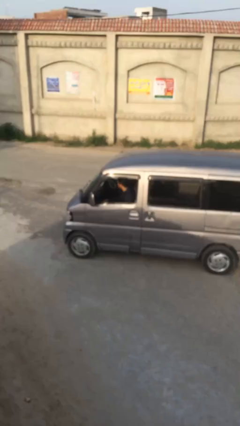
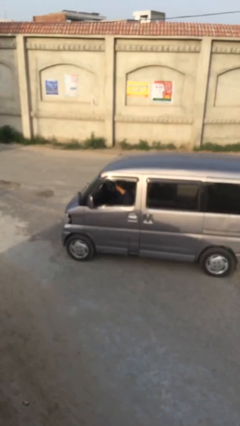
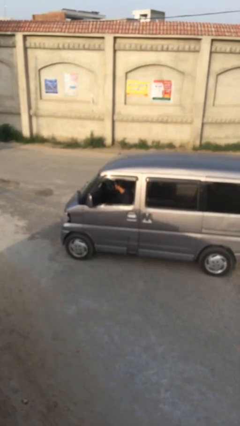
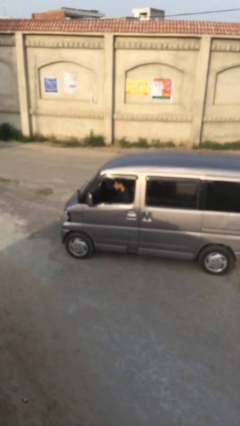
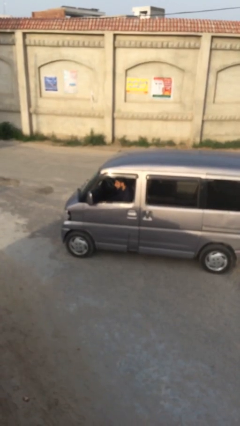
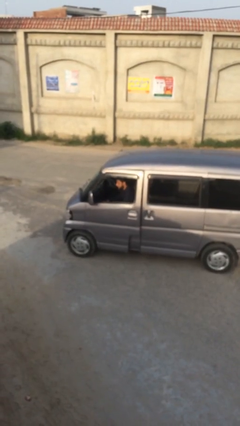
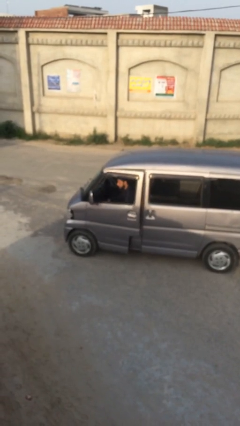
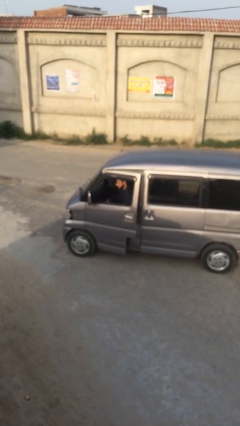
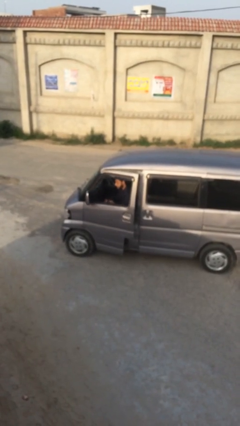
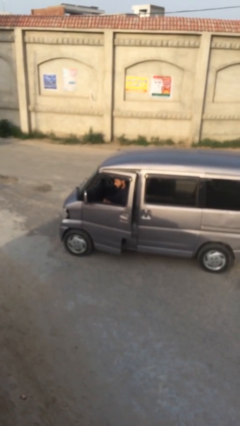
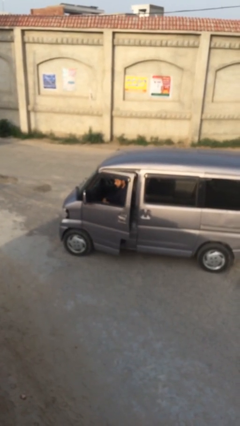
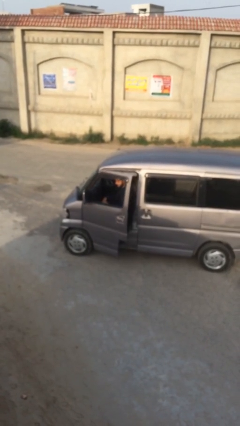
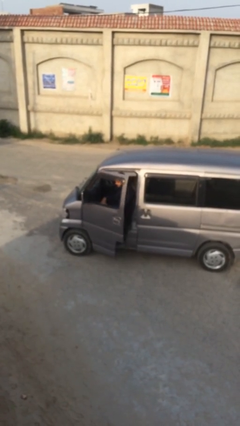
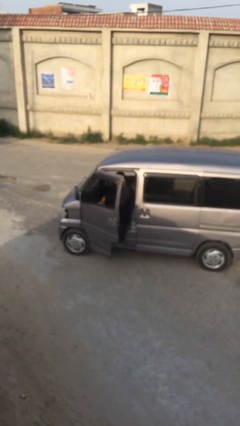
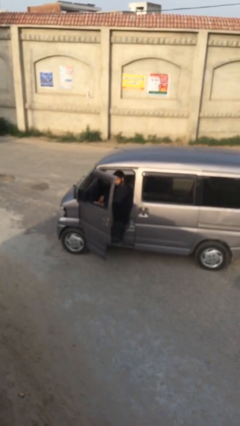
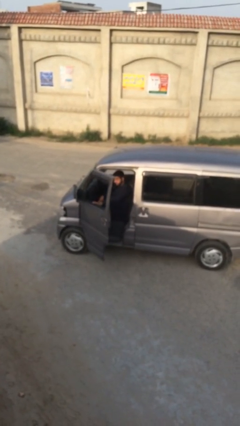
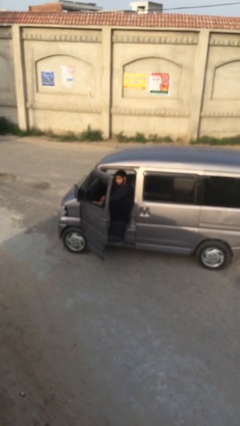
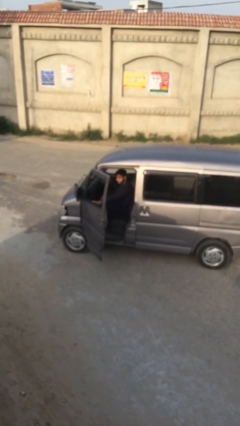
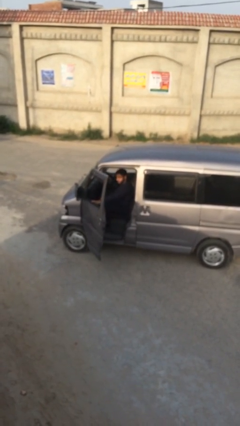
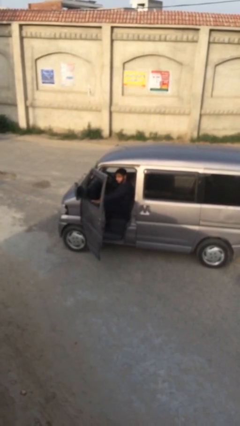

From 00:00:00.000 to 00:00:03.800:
person opens car door

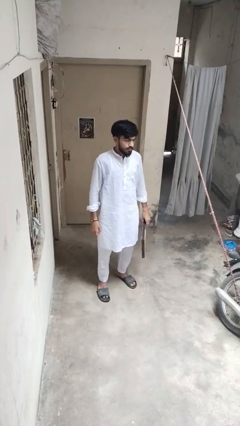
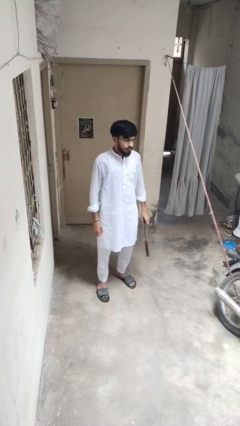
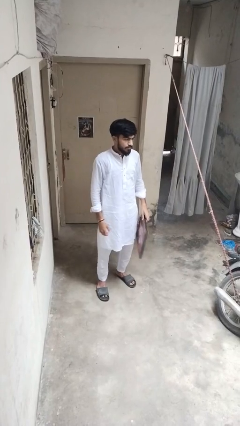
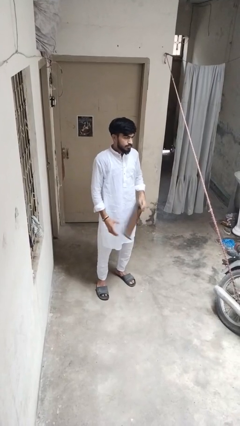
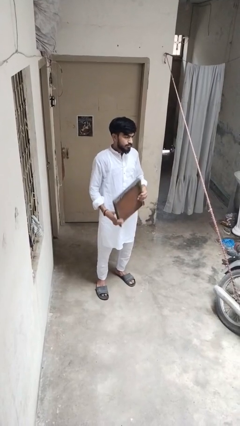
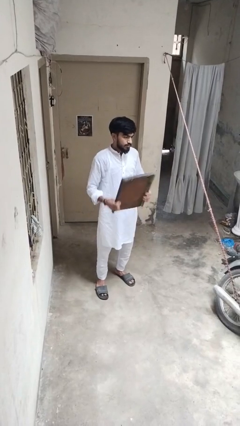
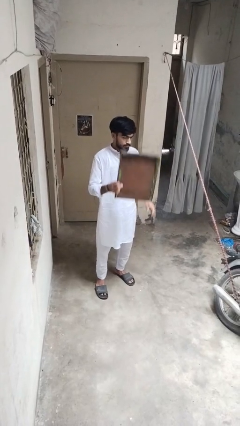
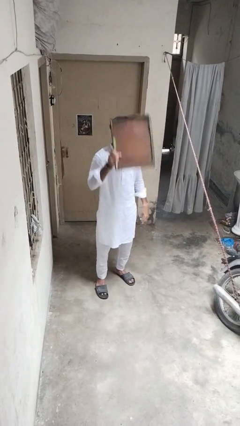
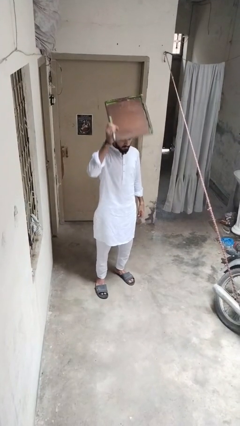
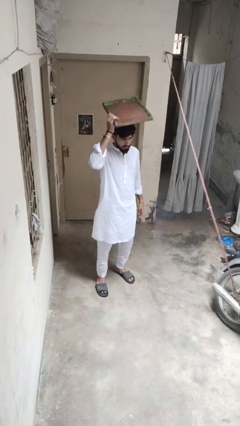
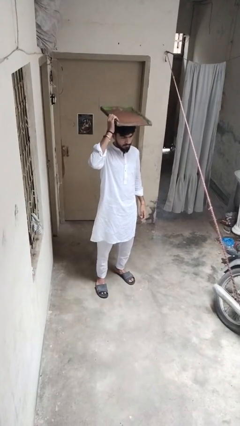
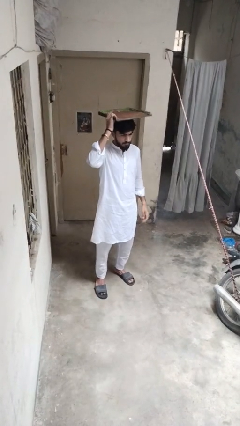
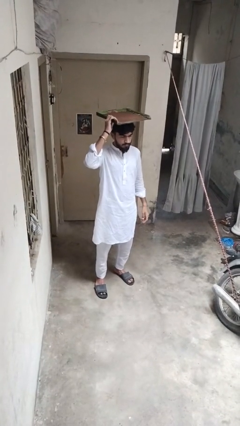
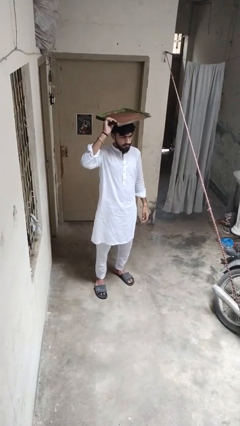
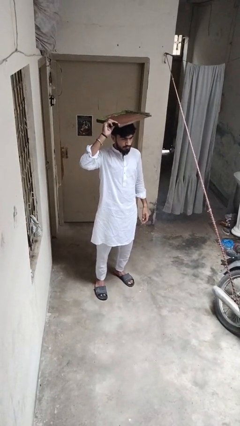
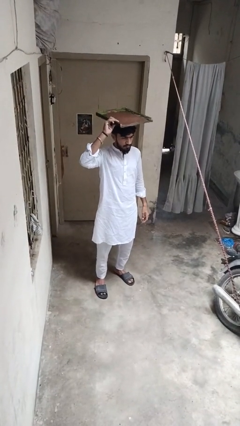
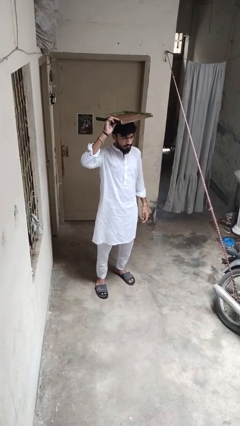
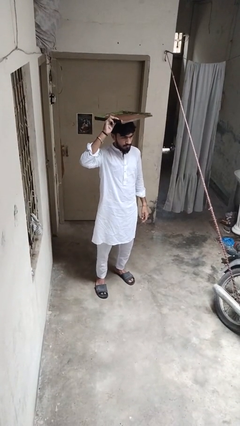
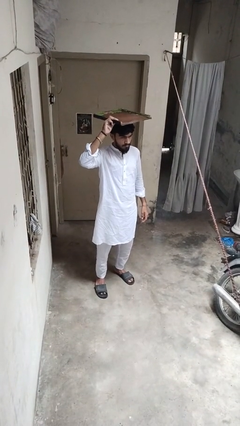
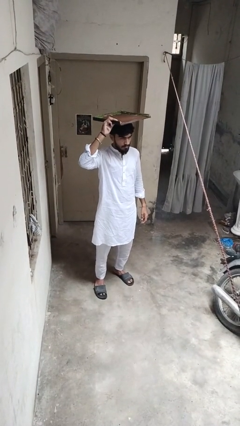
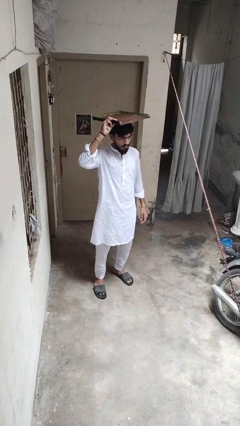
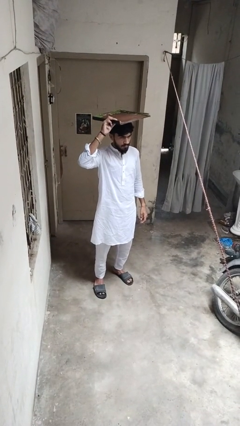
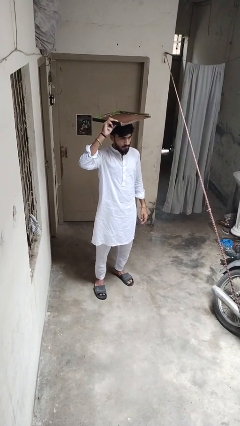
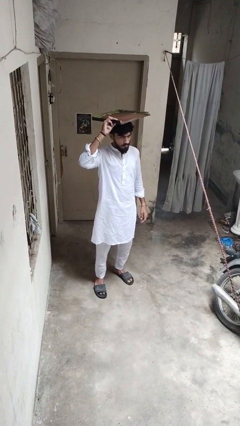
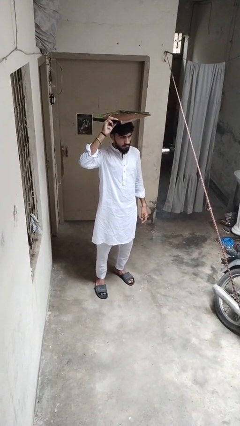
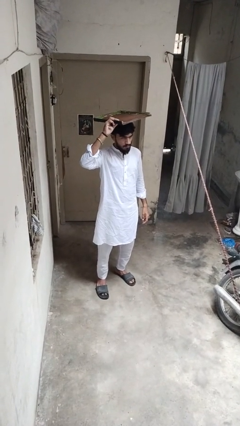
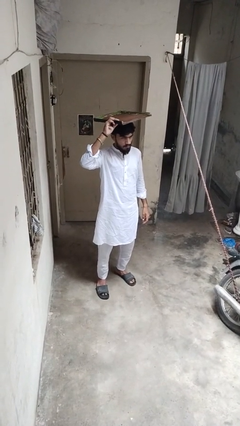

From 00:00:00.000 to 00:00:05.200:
person holds object above head

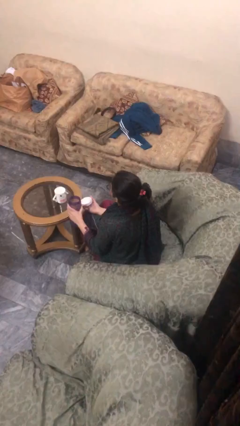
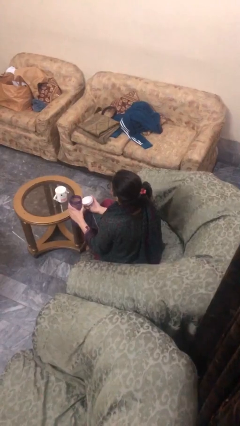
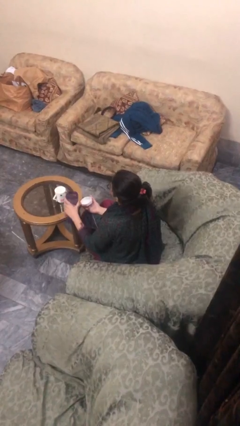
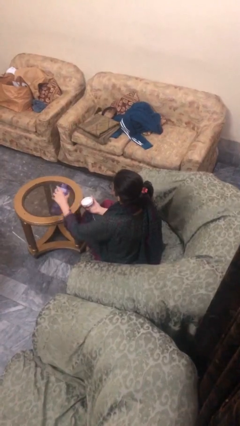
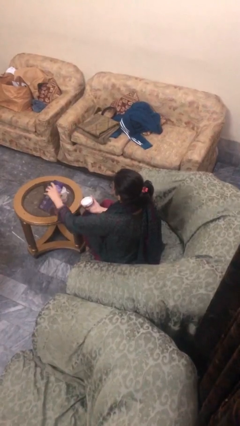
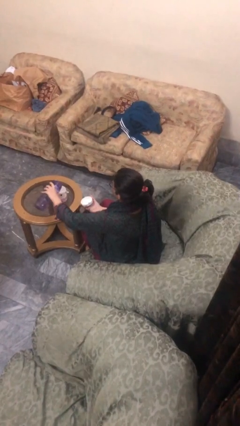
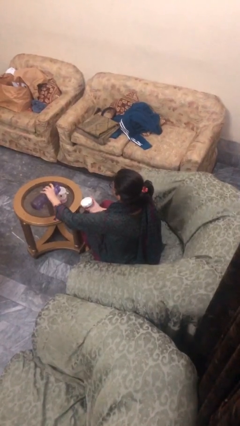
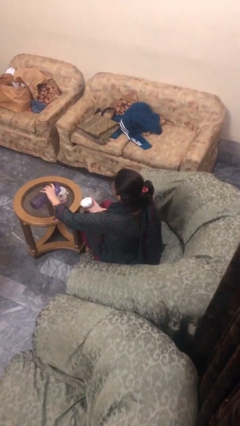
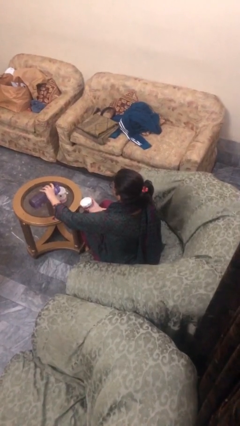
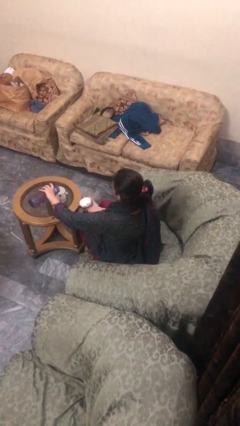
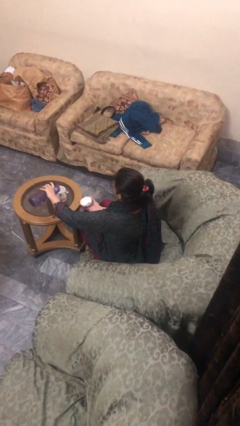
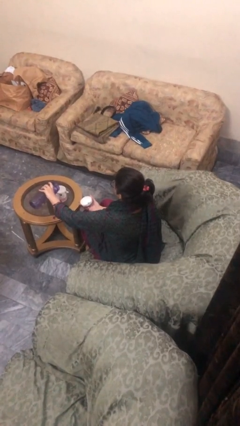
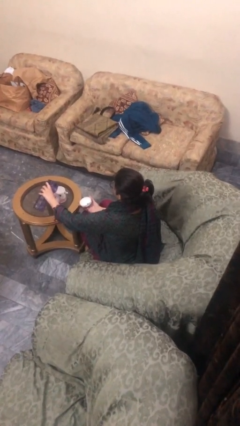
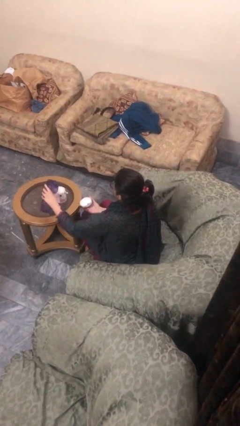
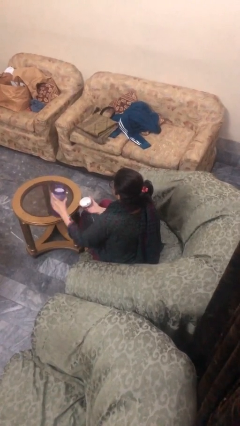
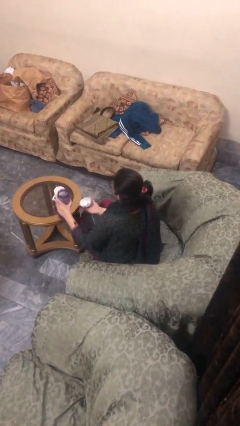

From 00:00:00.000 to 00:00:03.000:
person pours liquid into cup

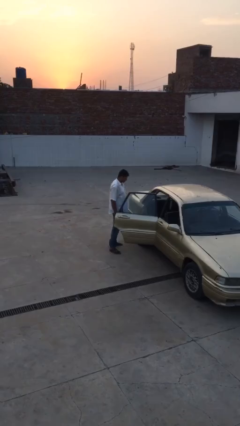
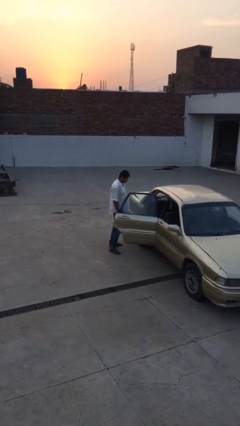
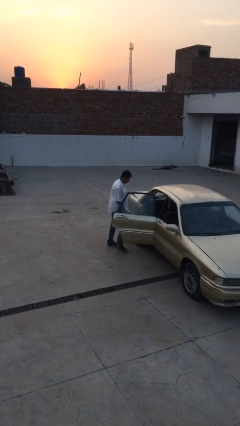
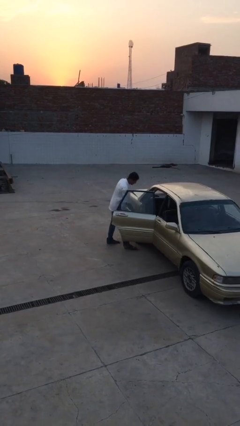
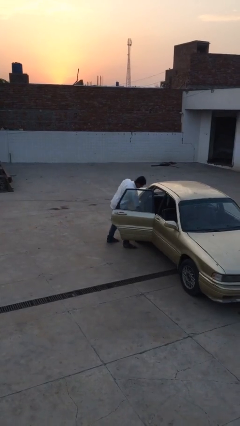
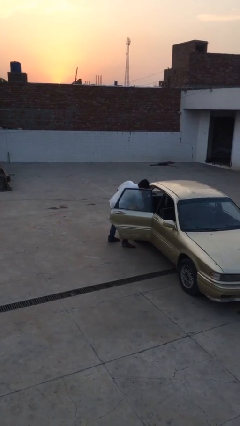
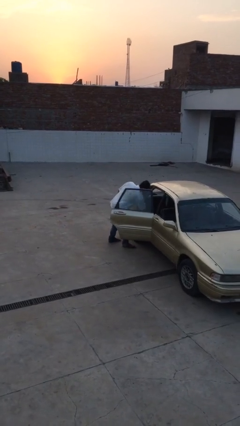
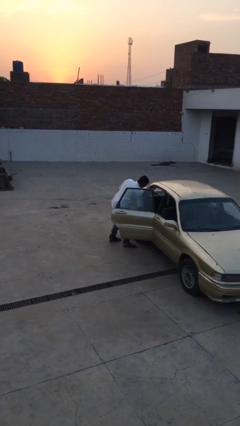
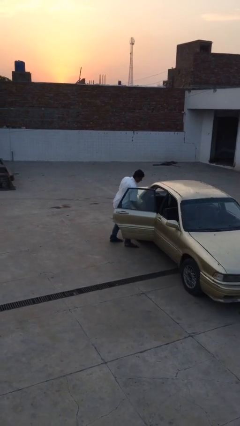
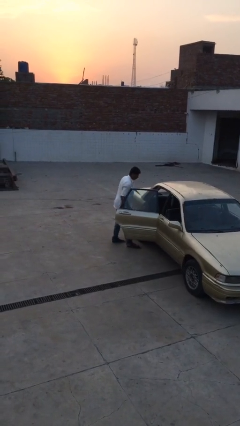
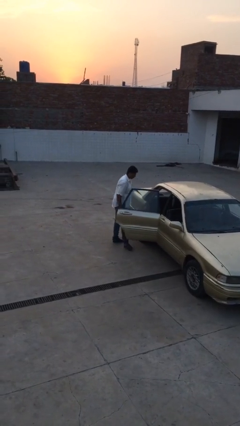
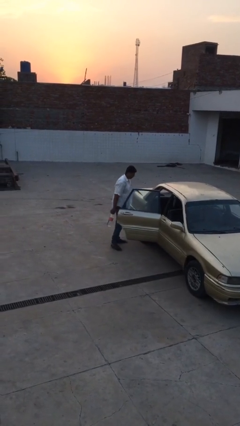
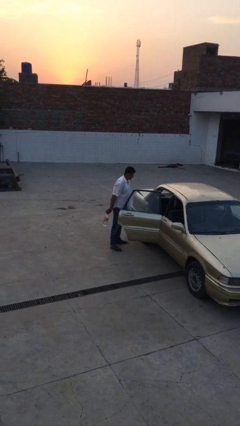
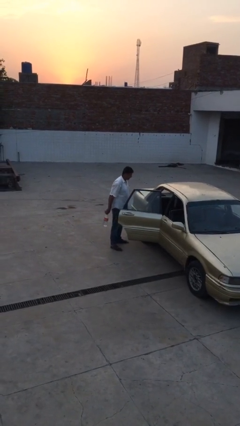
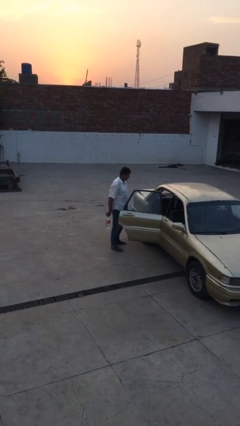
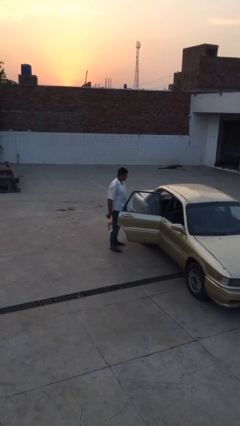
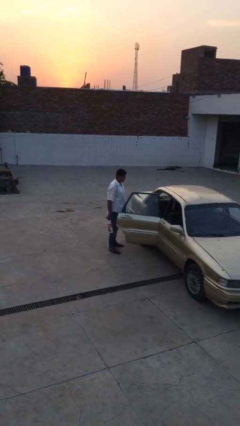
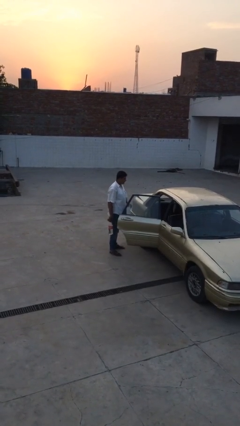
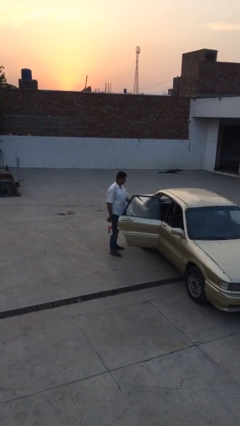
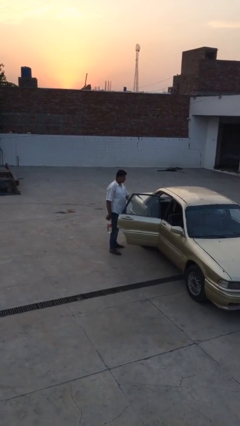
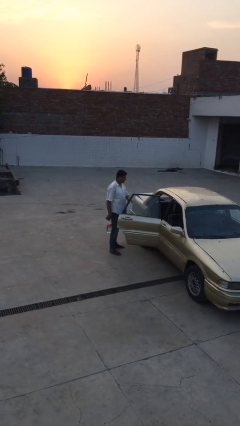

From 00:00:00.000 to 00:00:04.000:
person unloads car

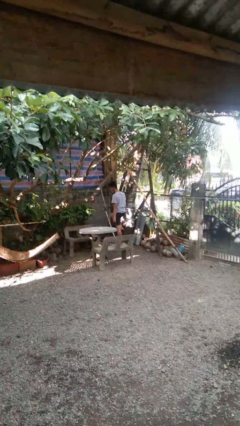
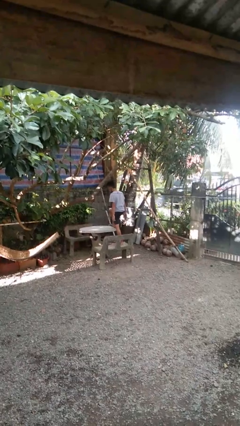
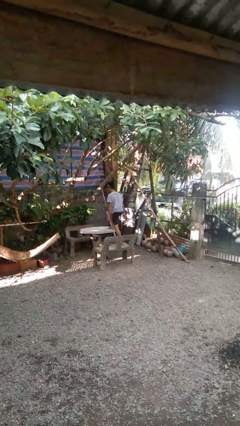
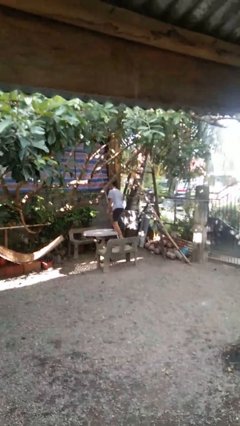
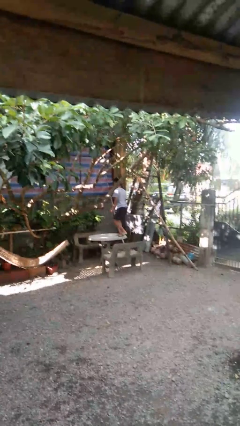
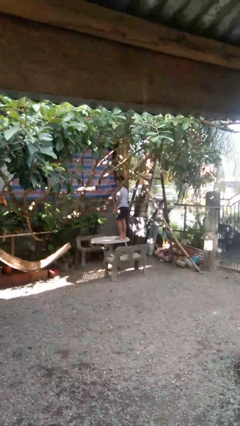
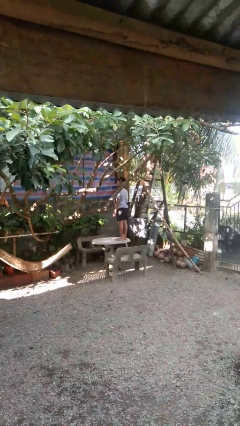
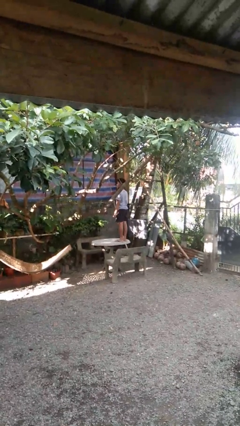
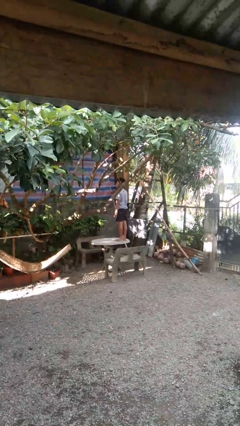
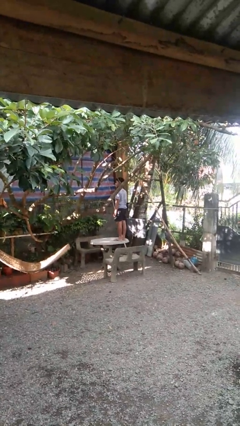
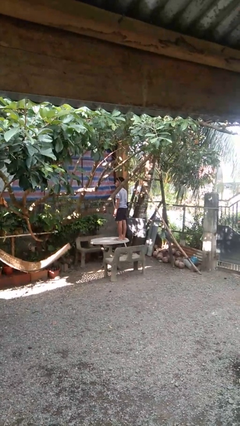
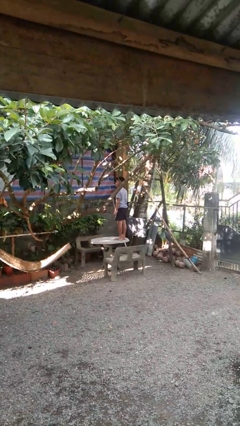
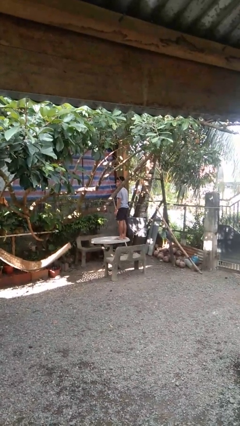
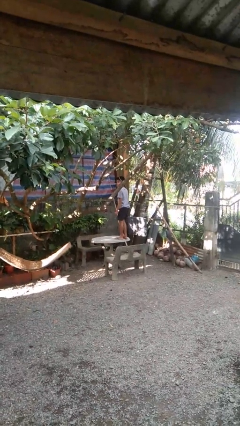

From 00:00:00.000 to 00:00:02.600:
person climbs on table
